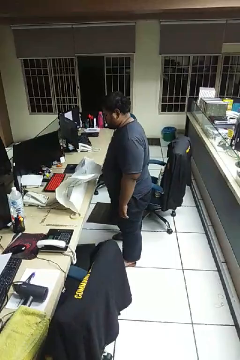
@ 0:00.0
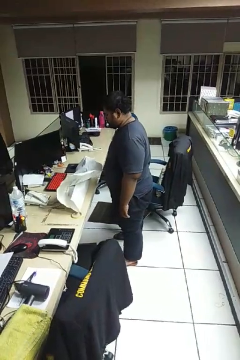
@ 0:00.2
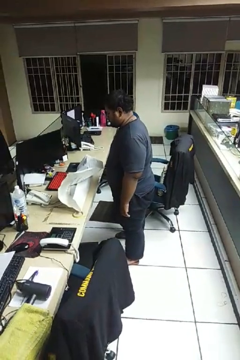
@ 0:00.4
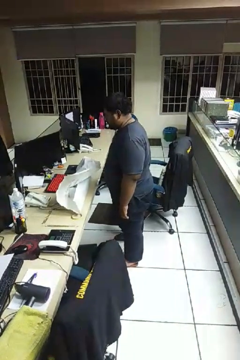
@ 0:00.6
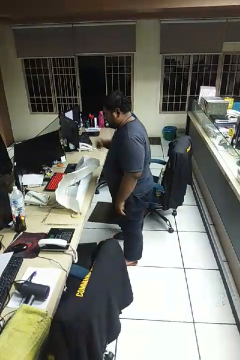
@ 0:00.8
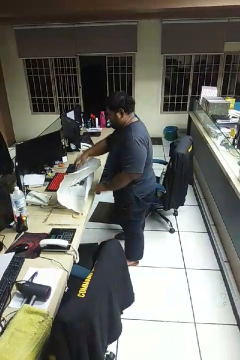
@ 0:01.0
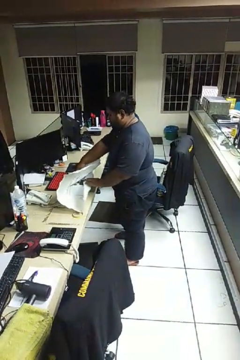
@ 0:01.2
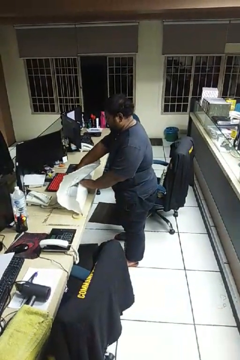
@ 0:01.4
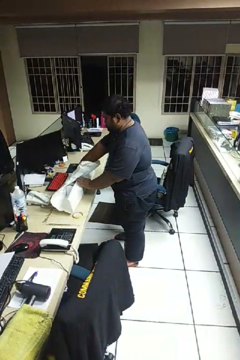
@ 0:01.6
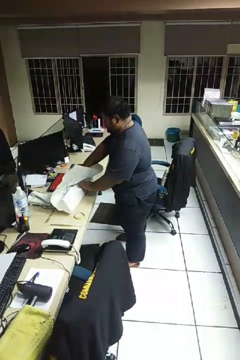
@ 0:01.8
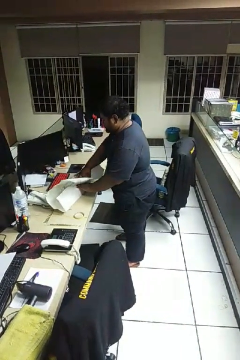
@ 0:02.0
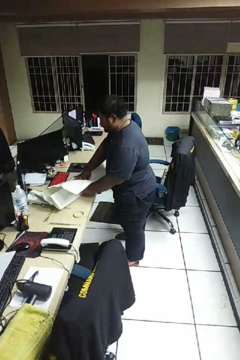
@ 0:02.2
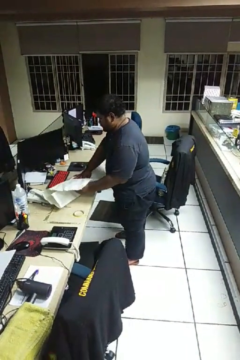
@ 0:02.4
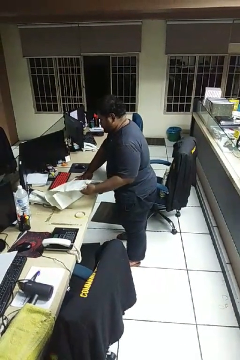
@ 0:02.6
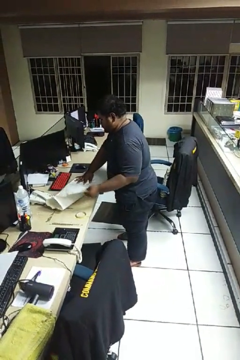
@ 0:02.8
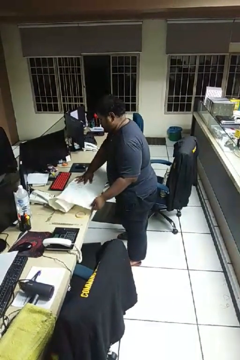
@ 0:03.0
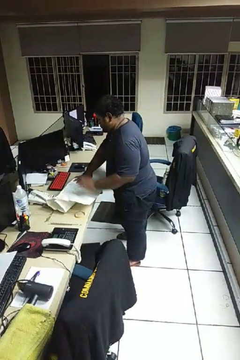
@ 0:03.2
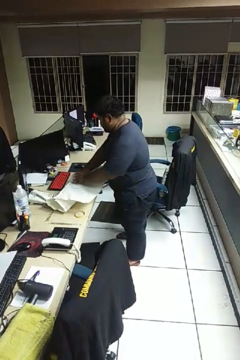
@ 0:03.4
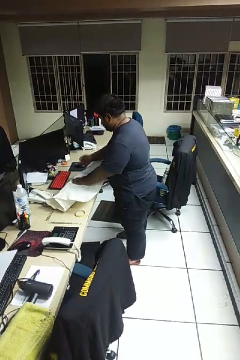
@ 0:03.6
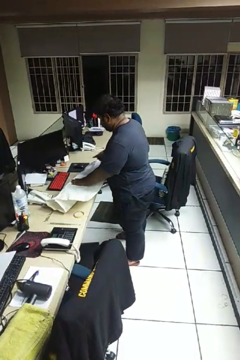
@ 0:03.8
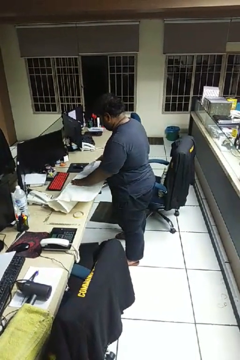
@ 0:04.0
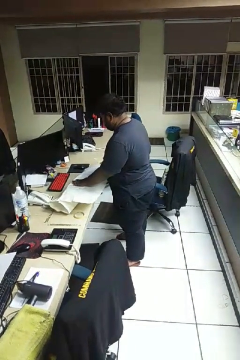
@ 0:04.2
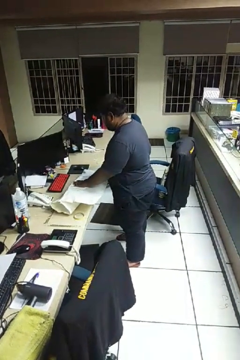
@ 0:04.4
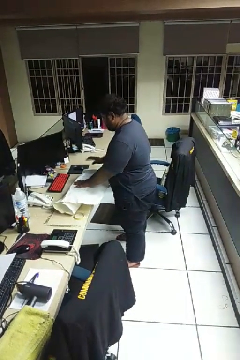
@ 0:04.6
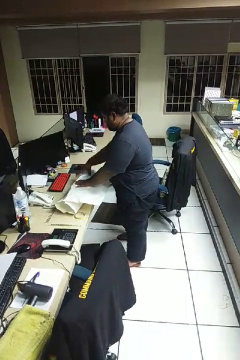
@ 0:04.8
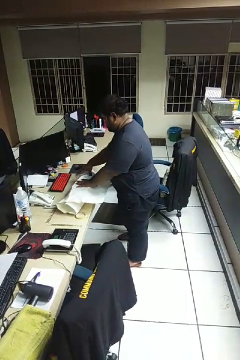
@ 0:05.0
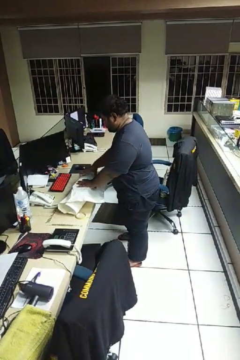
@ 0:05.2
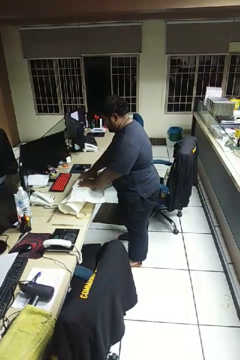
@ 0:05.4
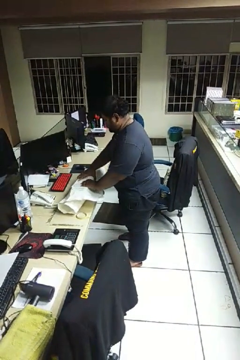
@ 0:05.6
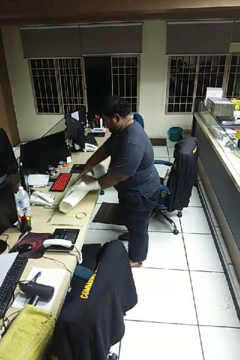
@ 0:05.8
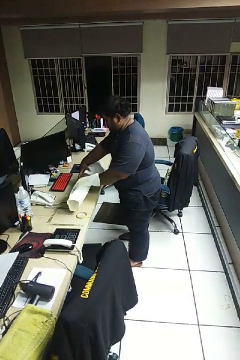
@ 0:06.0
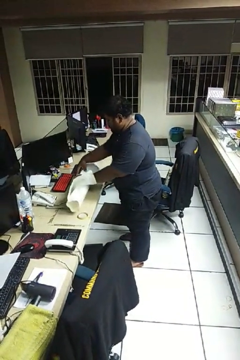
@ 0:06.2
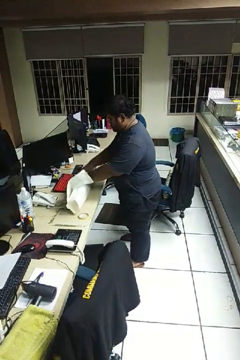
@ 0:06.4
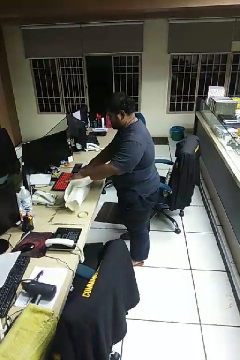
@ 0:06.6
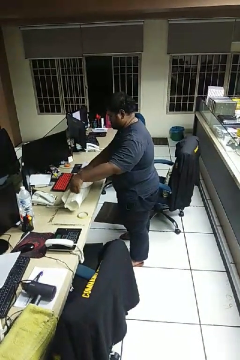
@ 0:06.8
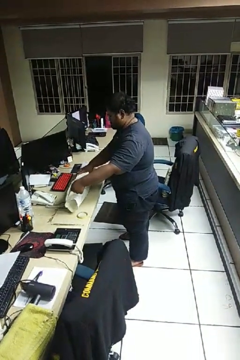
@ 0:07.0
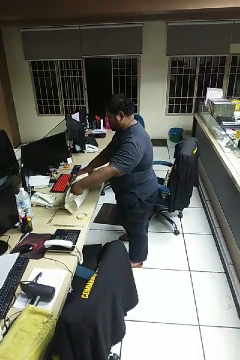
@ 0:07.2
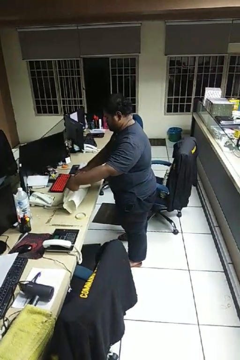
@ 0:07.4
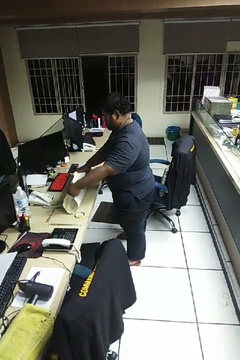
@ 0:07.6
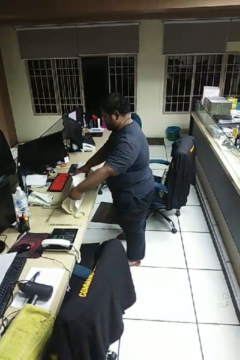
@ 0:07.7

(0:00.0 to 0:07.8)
person wraps box

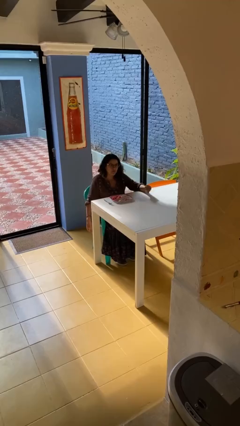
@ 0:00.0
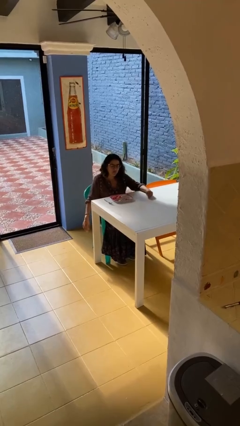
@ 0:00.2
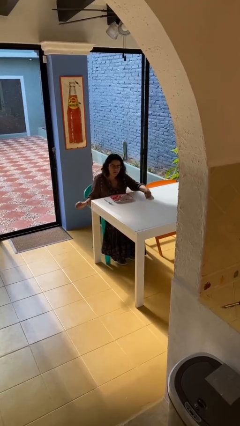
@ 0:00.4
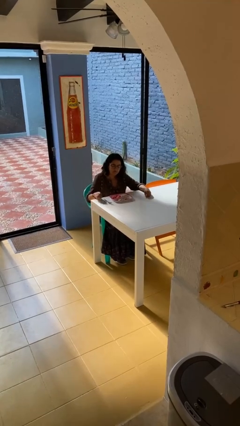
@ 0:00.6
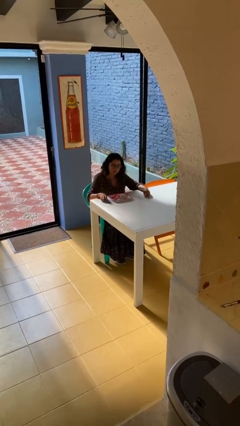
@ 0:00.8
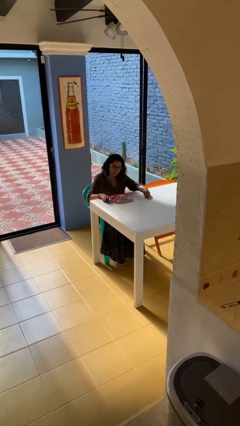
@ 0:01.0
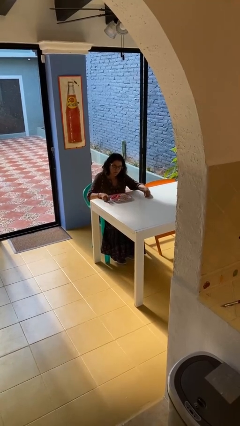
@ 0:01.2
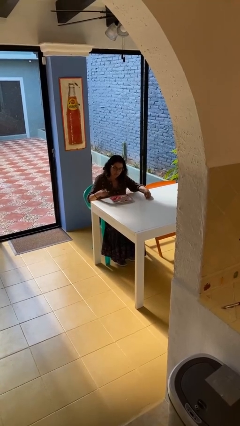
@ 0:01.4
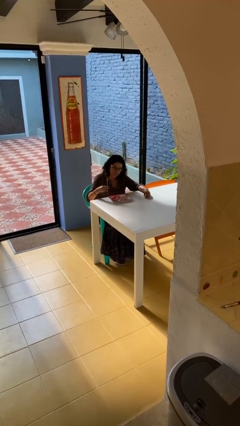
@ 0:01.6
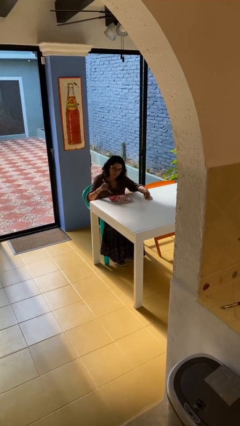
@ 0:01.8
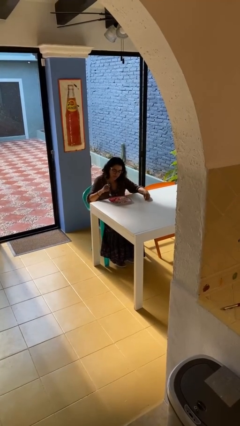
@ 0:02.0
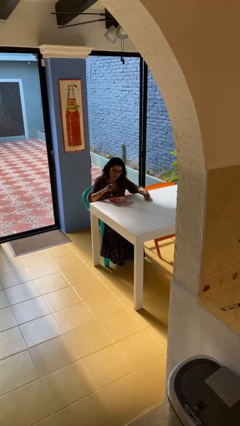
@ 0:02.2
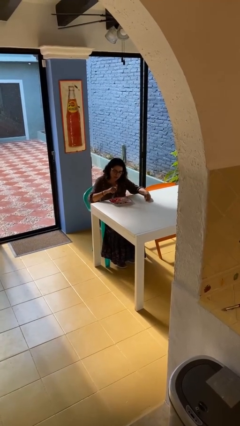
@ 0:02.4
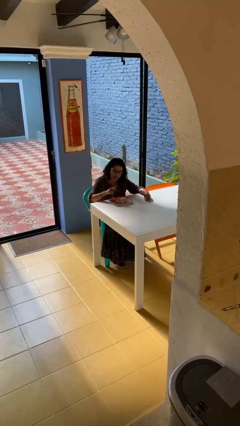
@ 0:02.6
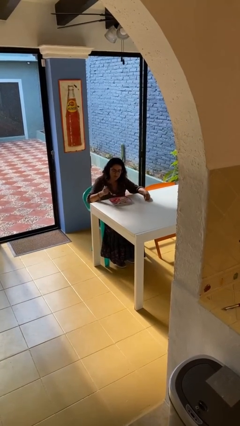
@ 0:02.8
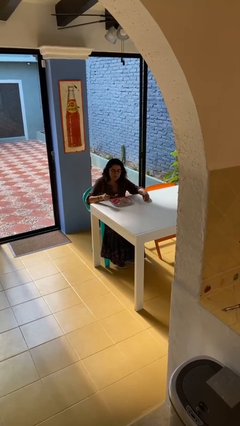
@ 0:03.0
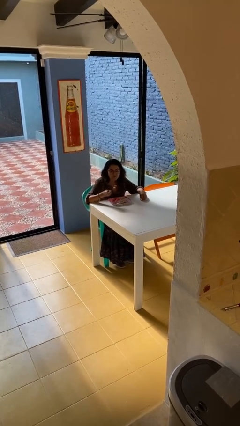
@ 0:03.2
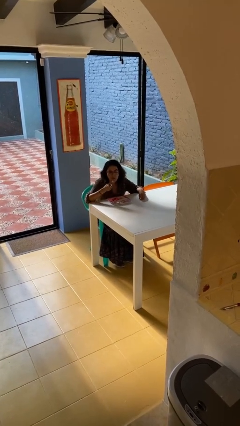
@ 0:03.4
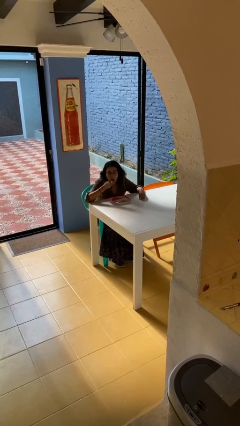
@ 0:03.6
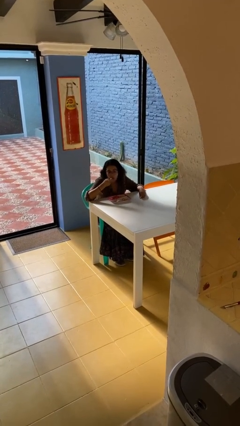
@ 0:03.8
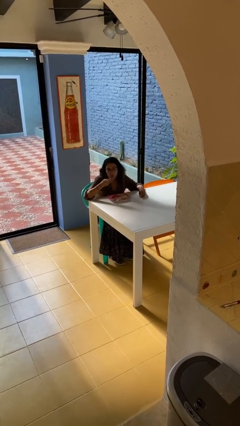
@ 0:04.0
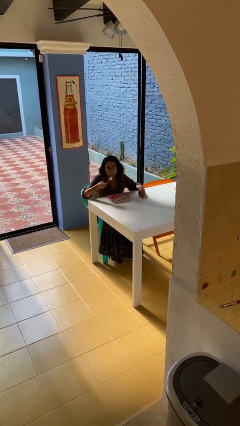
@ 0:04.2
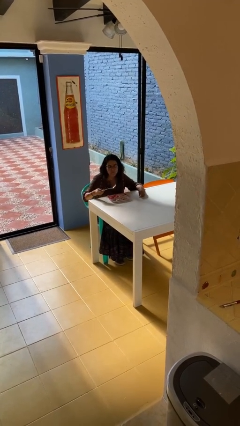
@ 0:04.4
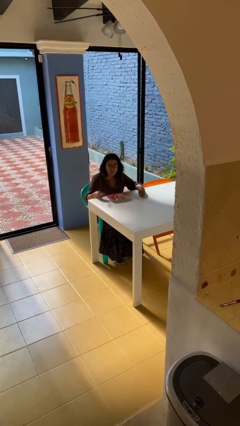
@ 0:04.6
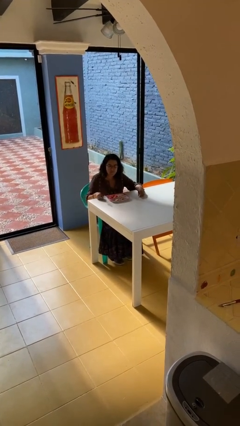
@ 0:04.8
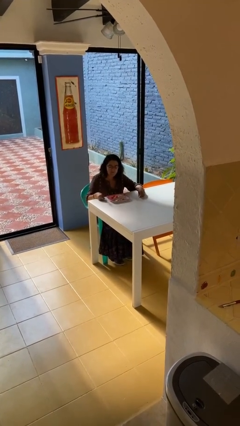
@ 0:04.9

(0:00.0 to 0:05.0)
person eats with utensil

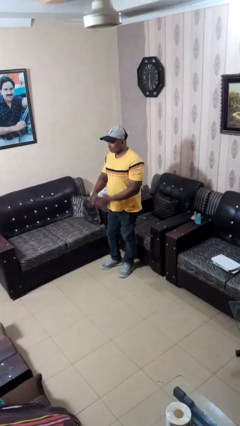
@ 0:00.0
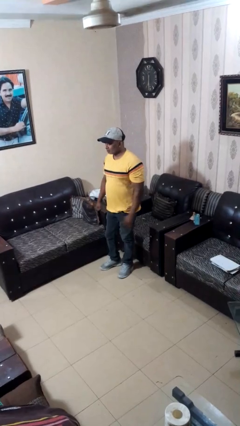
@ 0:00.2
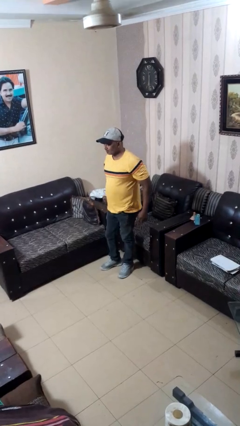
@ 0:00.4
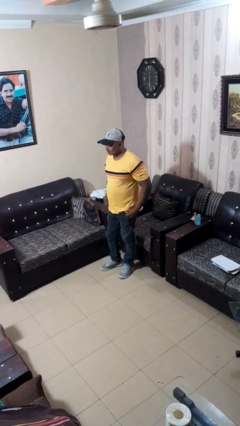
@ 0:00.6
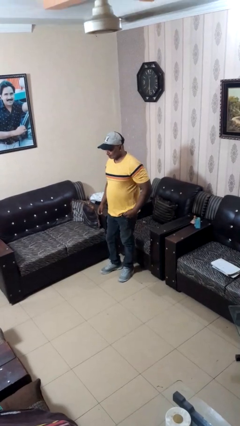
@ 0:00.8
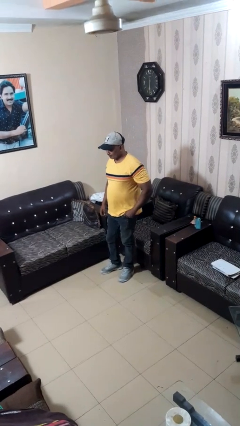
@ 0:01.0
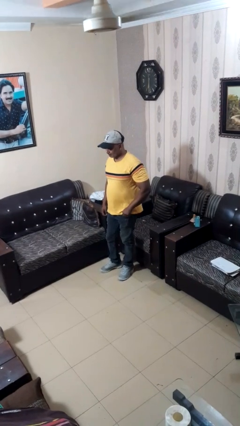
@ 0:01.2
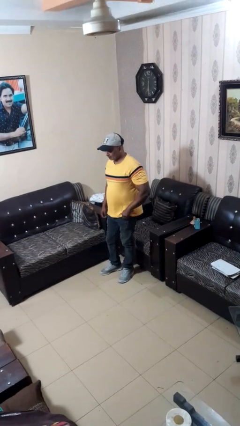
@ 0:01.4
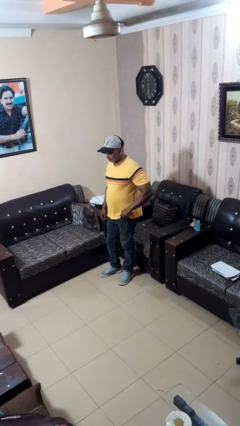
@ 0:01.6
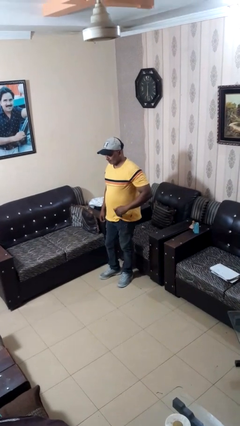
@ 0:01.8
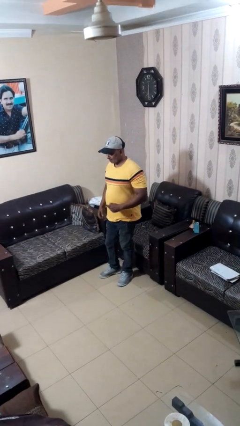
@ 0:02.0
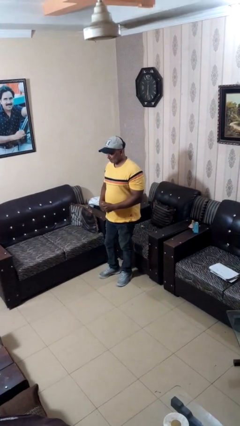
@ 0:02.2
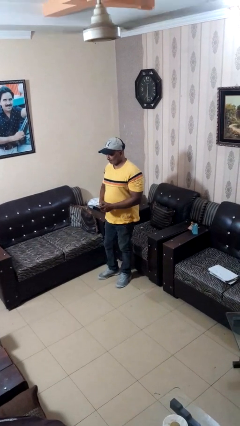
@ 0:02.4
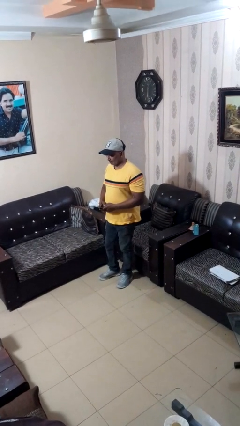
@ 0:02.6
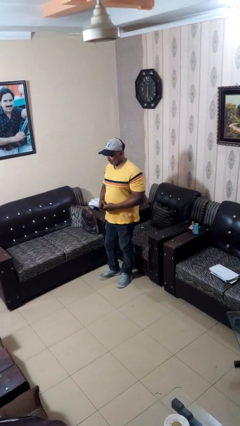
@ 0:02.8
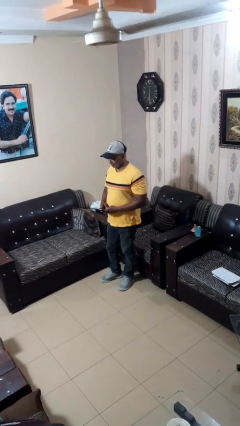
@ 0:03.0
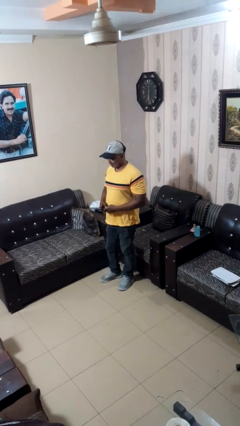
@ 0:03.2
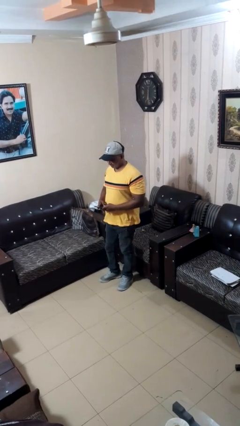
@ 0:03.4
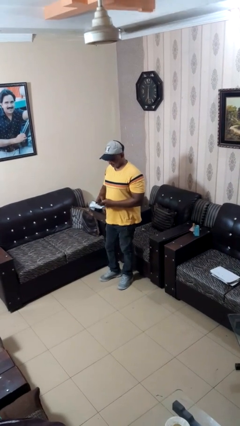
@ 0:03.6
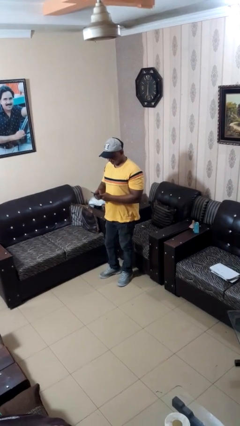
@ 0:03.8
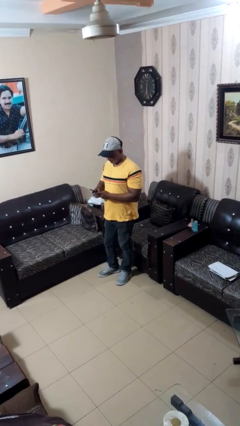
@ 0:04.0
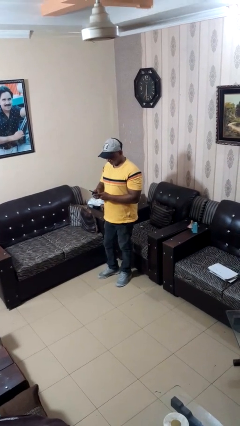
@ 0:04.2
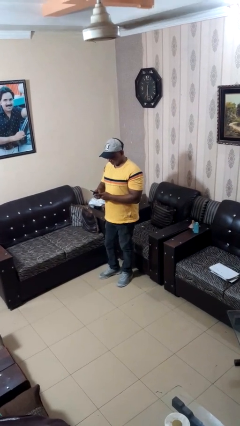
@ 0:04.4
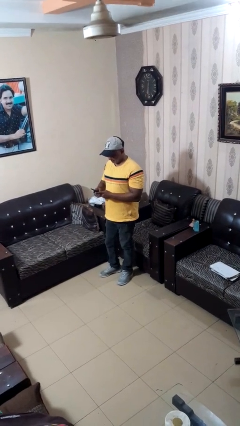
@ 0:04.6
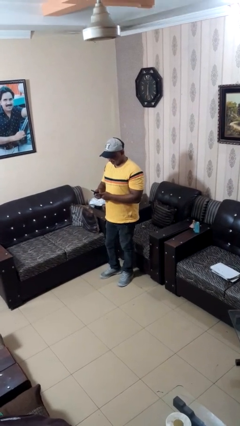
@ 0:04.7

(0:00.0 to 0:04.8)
person takes phone from pocket

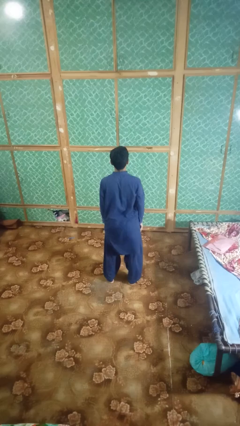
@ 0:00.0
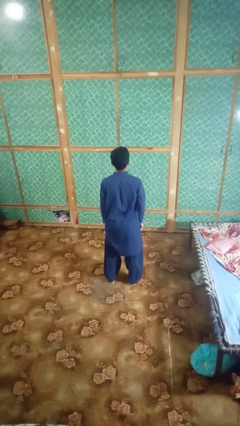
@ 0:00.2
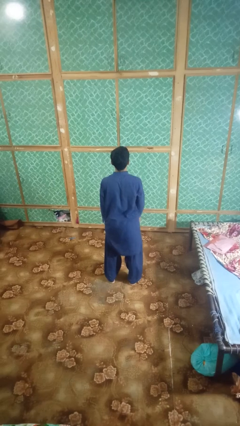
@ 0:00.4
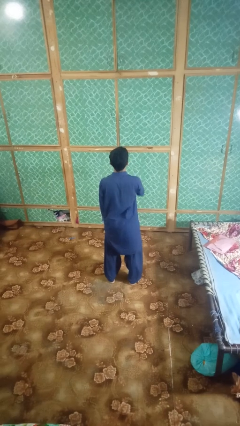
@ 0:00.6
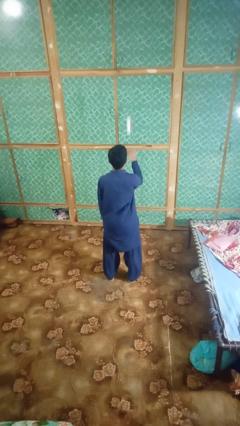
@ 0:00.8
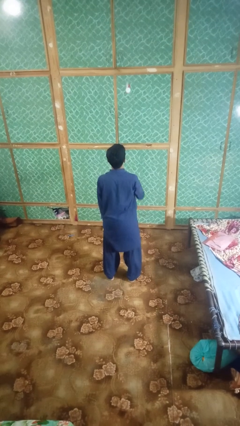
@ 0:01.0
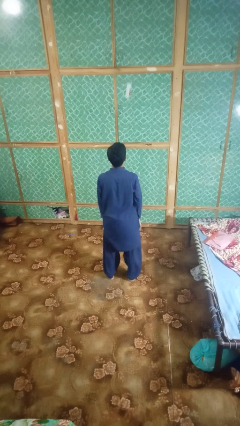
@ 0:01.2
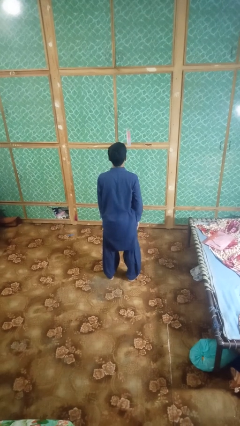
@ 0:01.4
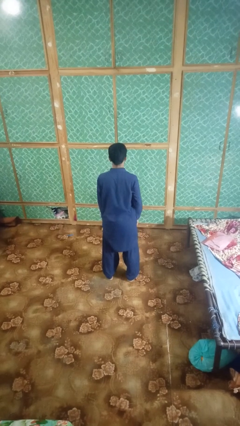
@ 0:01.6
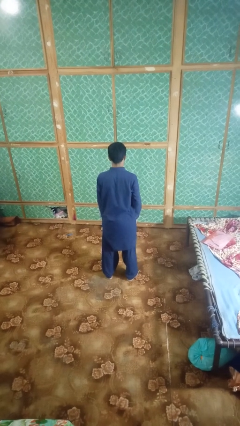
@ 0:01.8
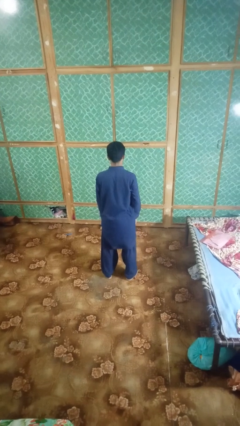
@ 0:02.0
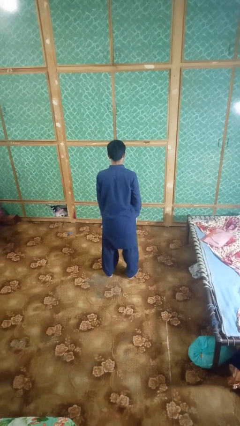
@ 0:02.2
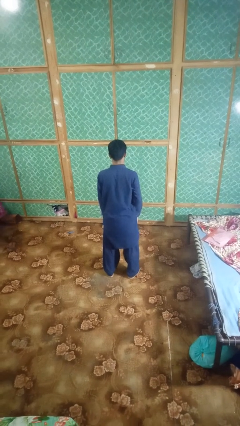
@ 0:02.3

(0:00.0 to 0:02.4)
person throws object into air
